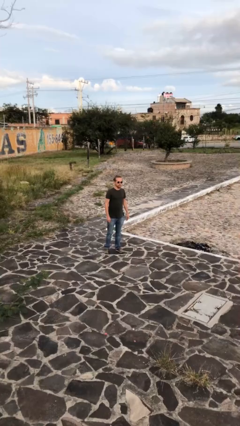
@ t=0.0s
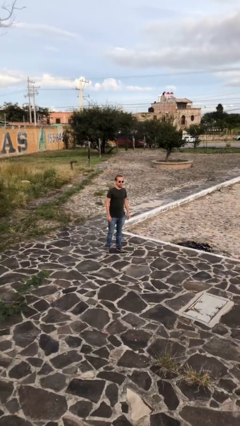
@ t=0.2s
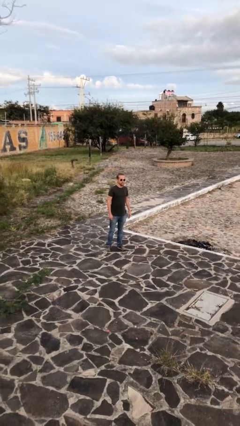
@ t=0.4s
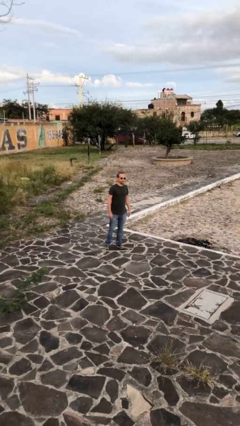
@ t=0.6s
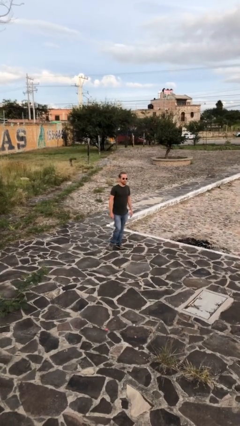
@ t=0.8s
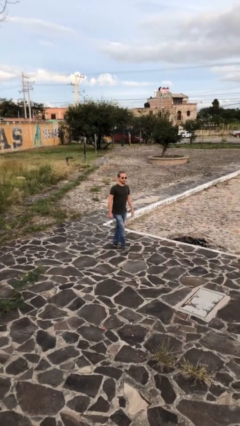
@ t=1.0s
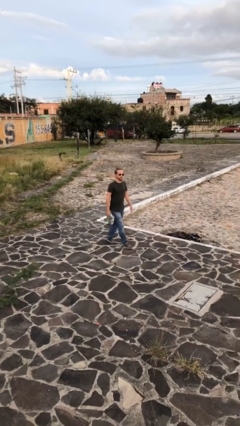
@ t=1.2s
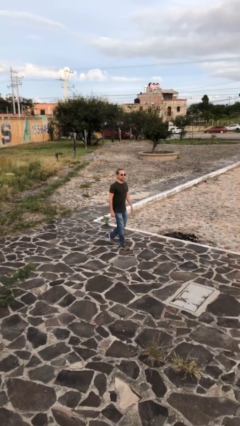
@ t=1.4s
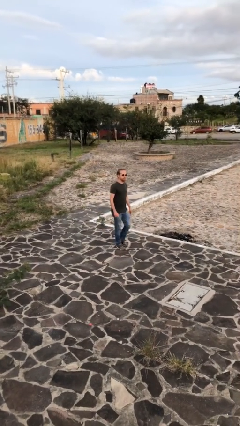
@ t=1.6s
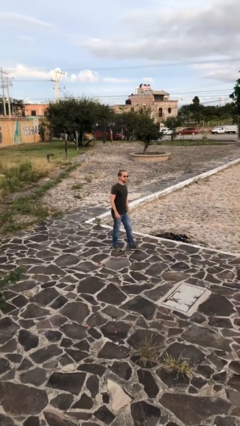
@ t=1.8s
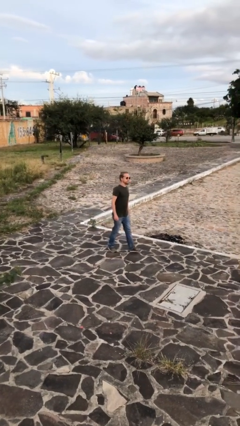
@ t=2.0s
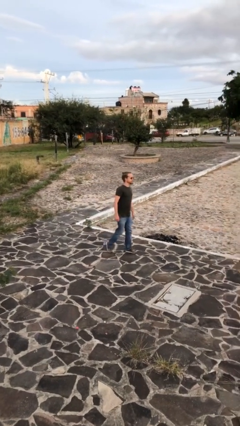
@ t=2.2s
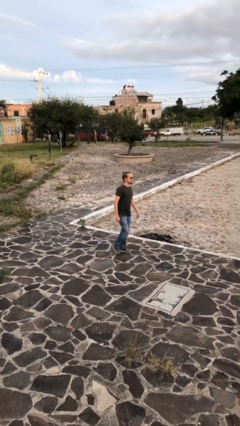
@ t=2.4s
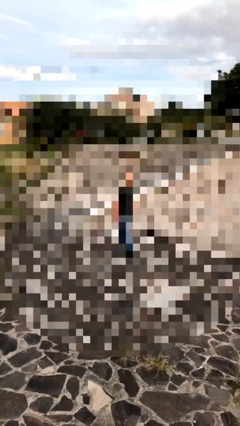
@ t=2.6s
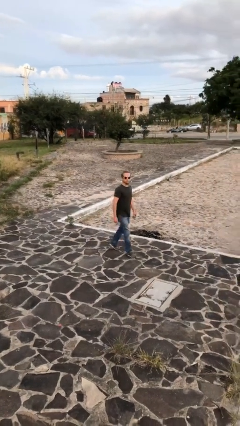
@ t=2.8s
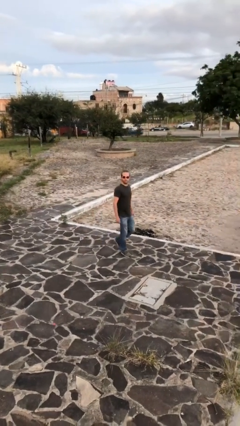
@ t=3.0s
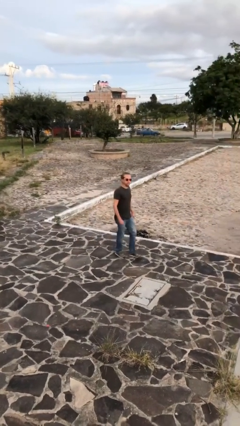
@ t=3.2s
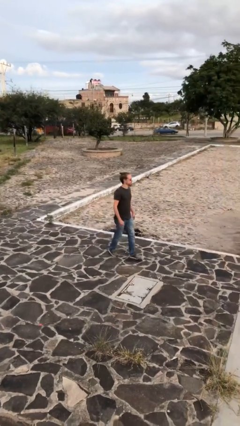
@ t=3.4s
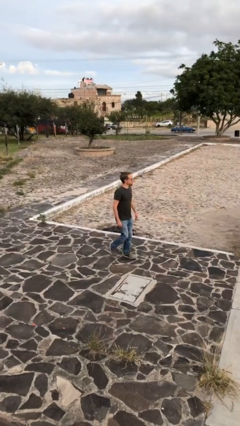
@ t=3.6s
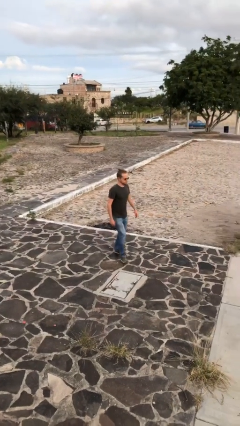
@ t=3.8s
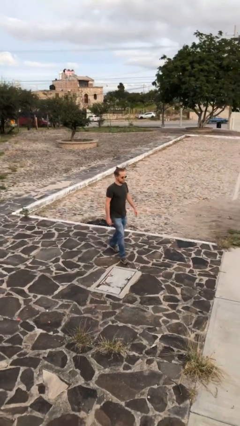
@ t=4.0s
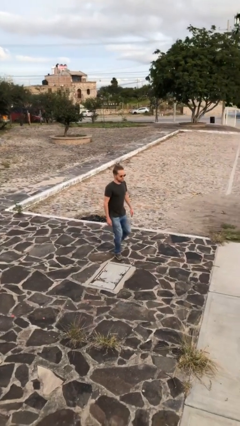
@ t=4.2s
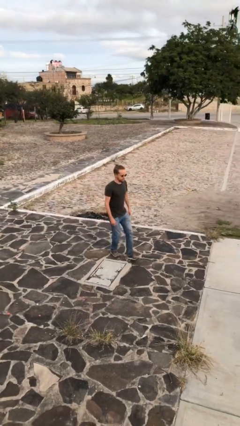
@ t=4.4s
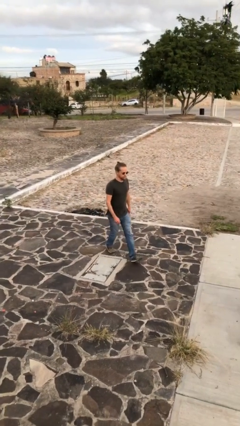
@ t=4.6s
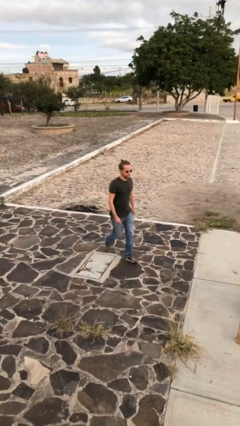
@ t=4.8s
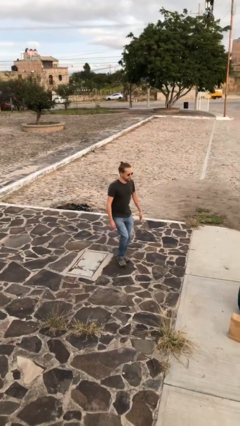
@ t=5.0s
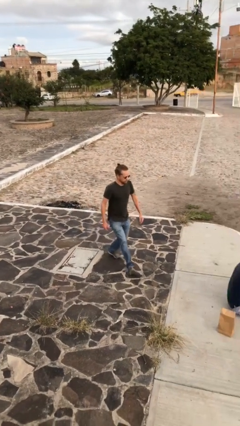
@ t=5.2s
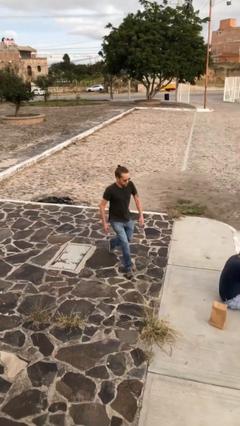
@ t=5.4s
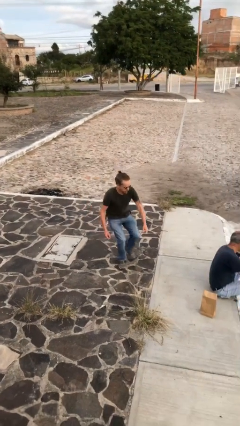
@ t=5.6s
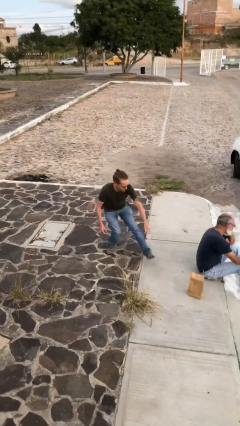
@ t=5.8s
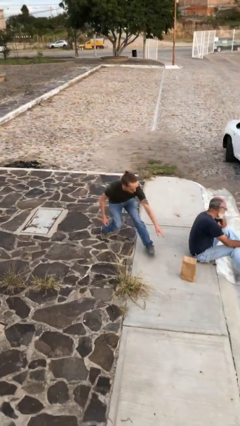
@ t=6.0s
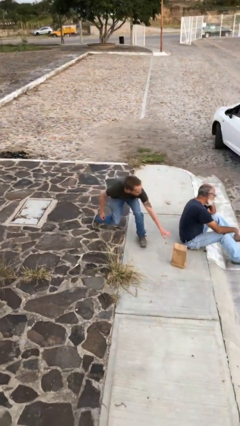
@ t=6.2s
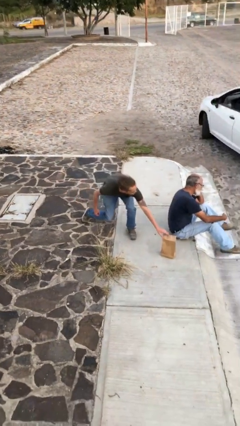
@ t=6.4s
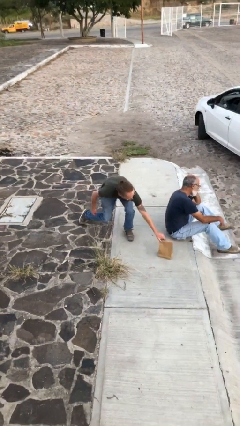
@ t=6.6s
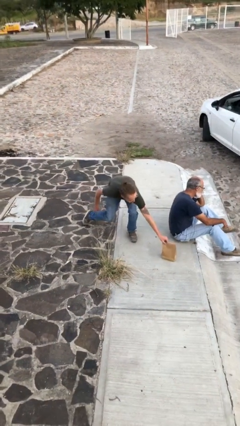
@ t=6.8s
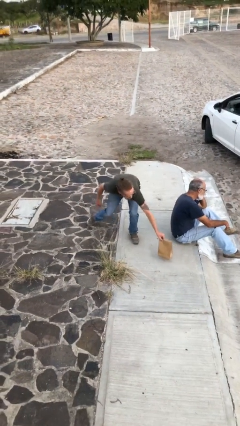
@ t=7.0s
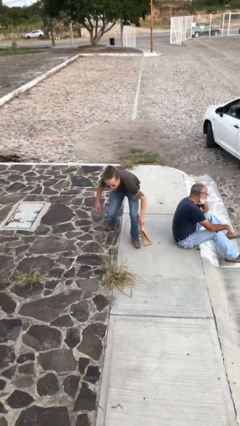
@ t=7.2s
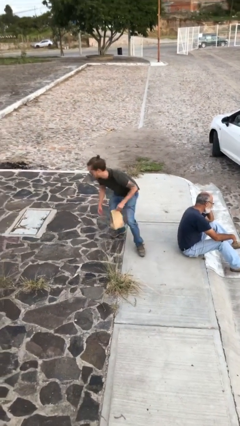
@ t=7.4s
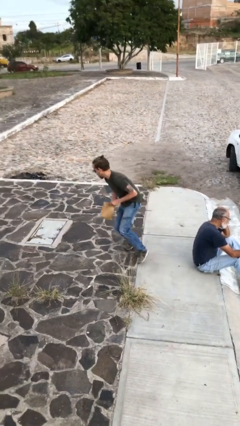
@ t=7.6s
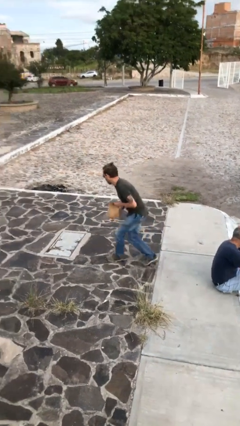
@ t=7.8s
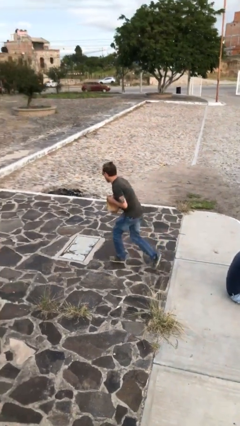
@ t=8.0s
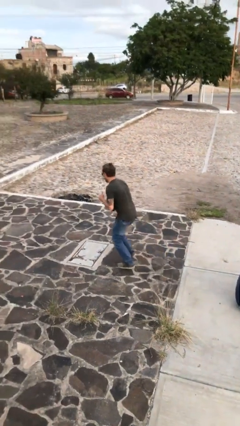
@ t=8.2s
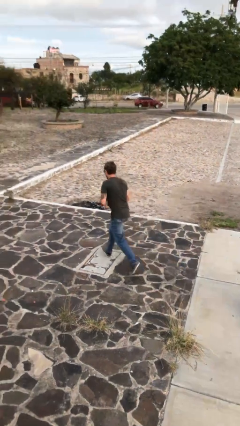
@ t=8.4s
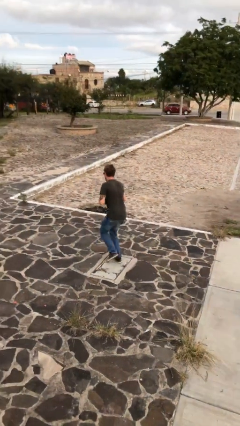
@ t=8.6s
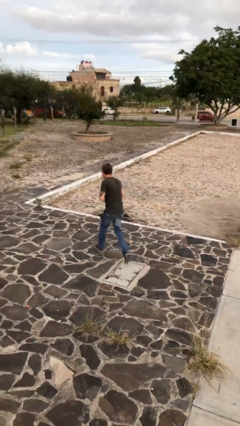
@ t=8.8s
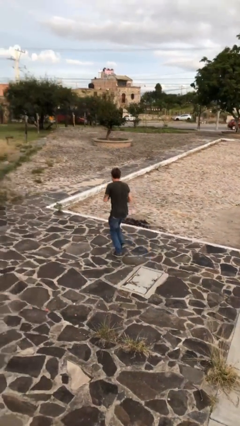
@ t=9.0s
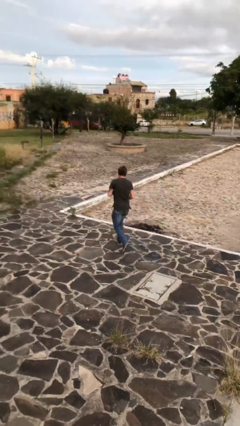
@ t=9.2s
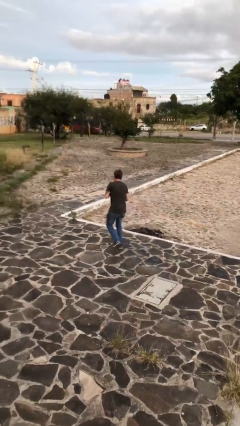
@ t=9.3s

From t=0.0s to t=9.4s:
person steals object from person

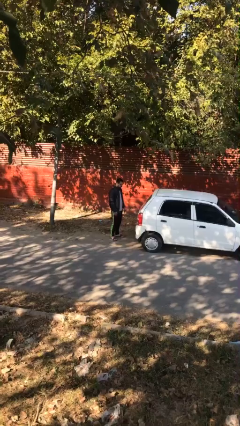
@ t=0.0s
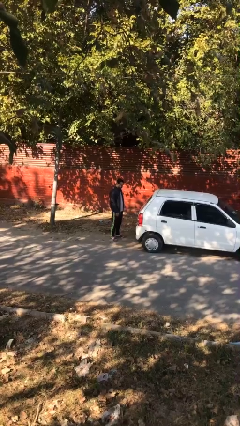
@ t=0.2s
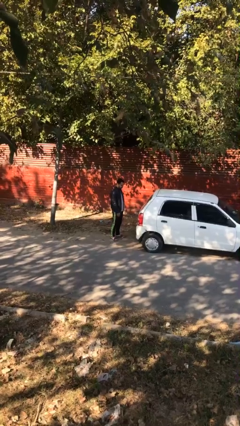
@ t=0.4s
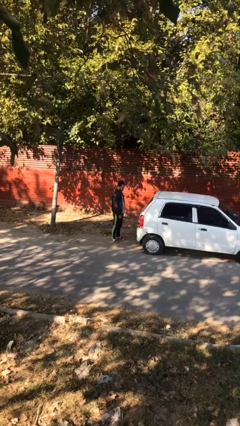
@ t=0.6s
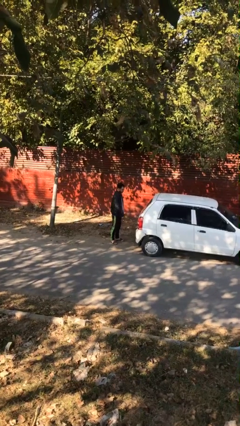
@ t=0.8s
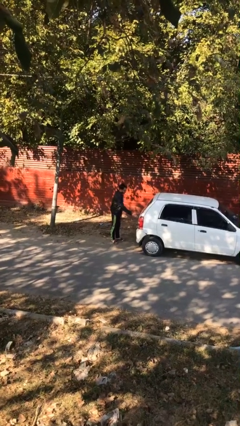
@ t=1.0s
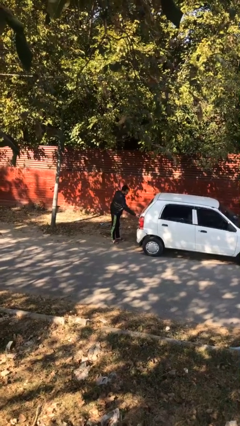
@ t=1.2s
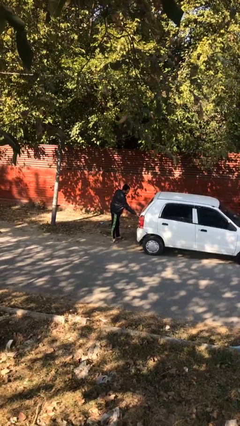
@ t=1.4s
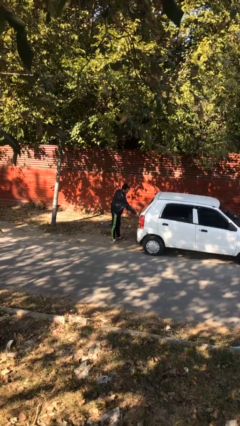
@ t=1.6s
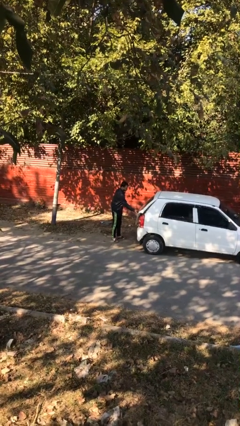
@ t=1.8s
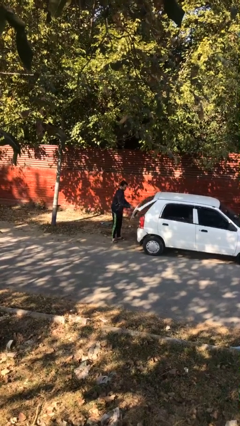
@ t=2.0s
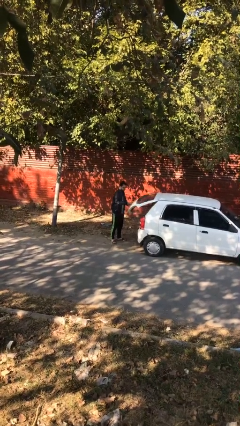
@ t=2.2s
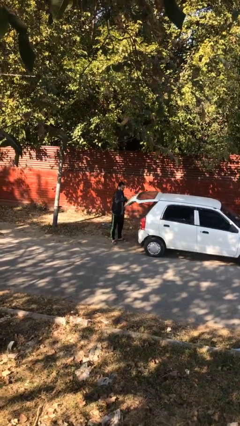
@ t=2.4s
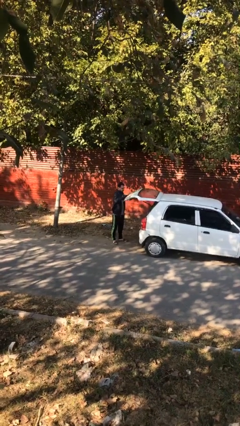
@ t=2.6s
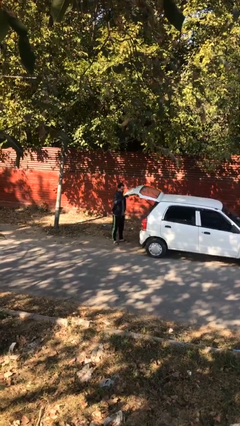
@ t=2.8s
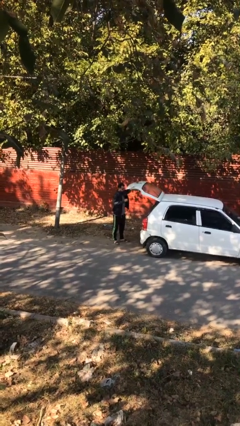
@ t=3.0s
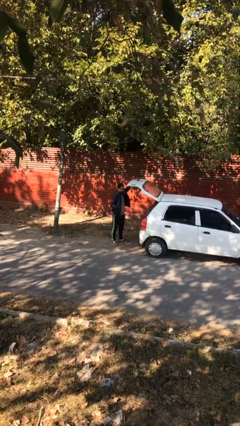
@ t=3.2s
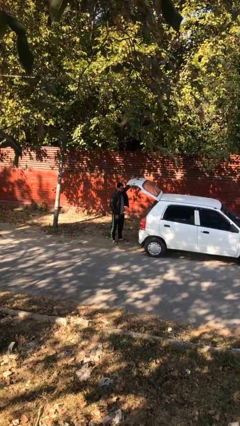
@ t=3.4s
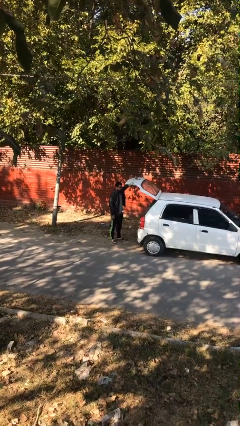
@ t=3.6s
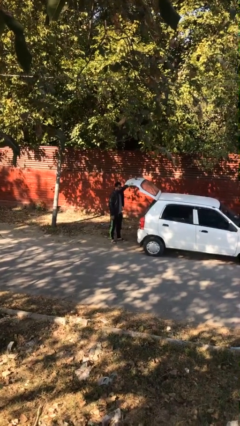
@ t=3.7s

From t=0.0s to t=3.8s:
person opens car trunk

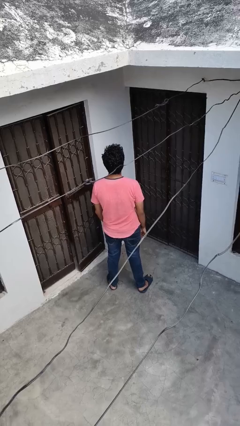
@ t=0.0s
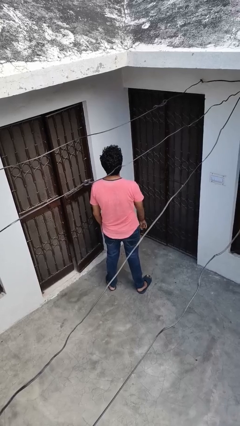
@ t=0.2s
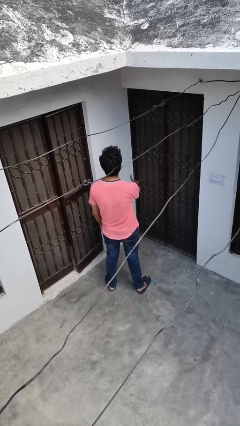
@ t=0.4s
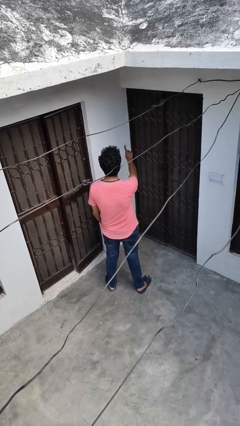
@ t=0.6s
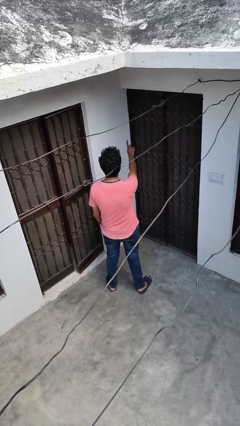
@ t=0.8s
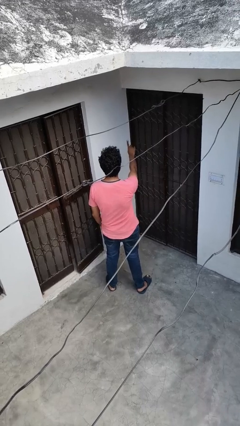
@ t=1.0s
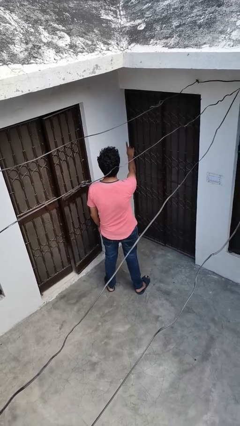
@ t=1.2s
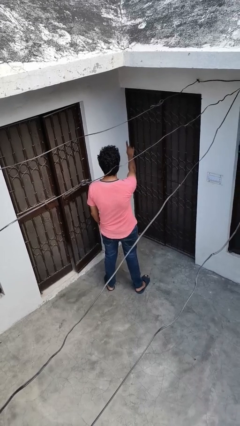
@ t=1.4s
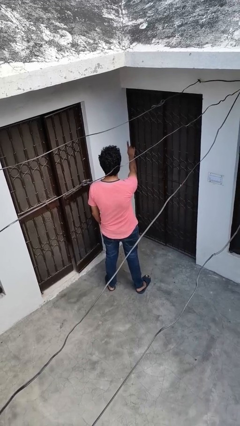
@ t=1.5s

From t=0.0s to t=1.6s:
person gestures number one

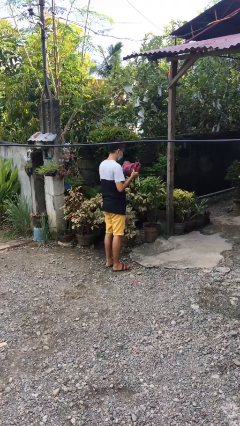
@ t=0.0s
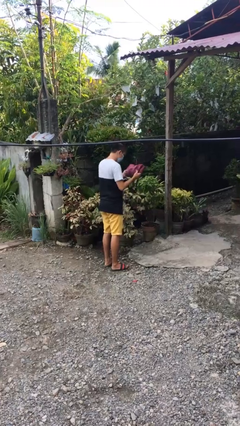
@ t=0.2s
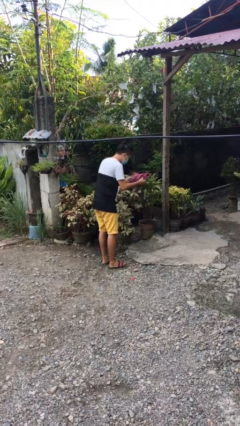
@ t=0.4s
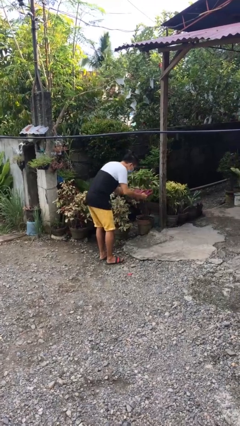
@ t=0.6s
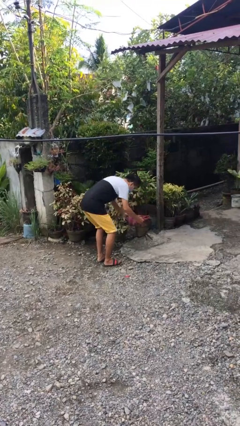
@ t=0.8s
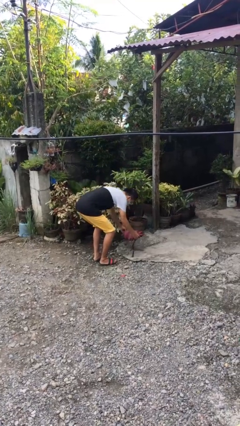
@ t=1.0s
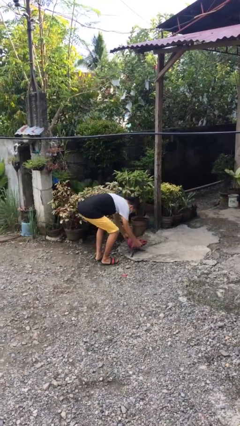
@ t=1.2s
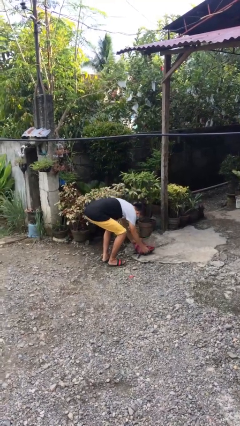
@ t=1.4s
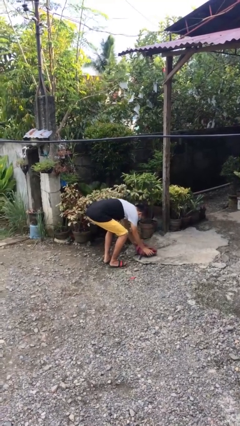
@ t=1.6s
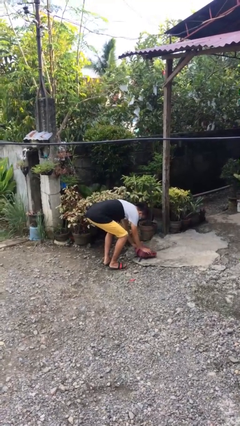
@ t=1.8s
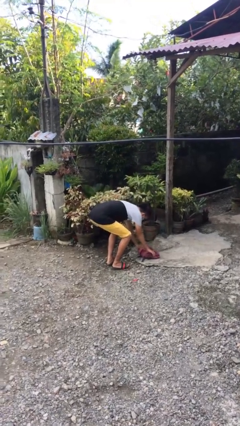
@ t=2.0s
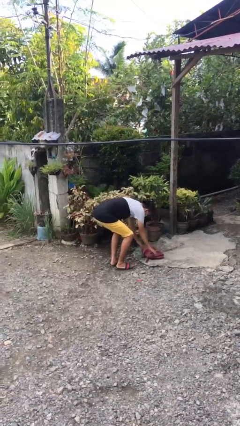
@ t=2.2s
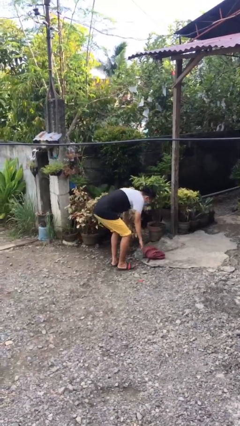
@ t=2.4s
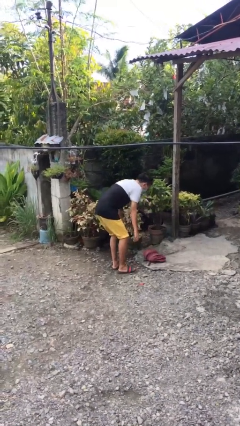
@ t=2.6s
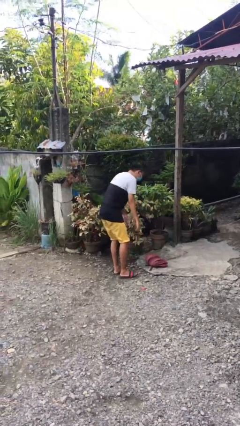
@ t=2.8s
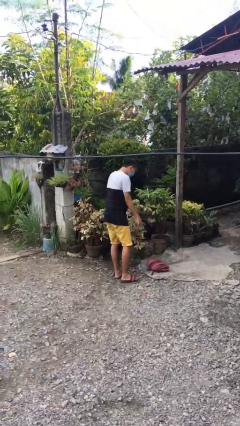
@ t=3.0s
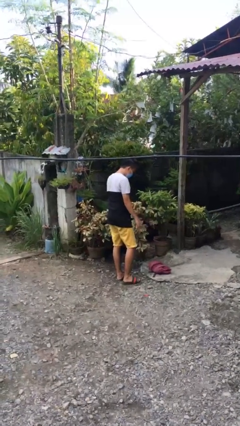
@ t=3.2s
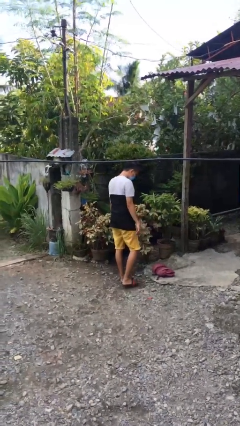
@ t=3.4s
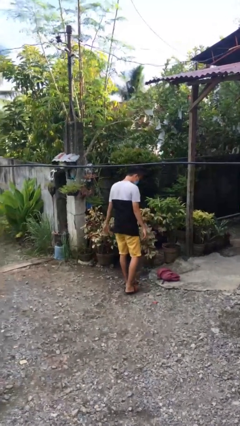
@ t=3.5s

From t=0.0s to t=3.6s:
person puts down object on floor
